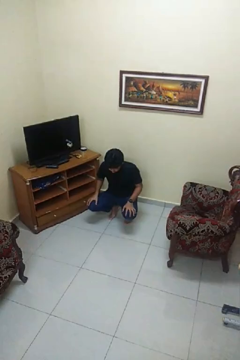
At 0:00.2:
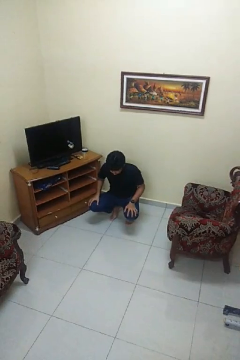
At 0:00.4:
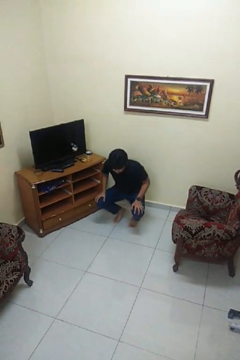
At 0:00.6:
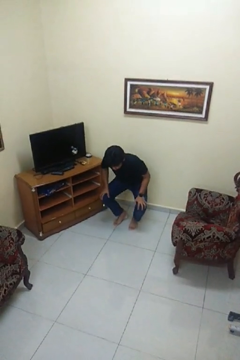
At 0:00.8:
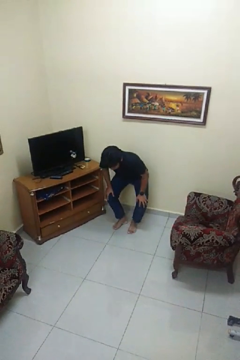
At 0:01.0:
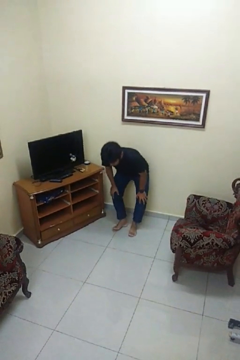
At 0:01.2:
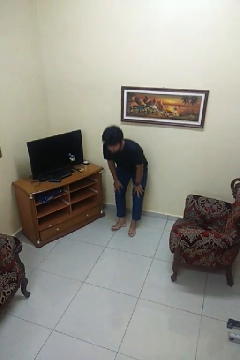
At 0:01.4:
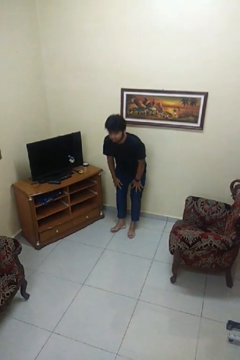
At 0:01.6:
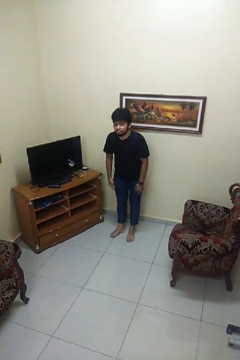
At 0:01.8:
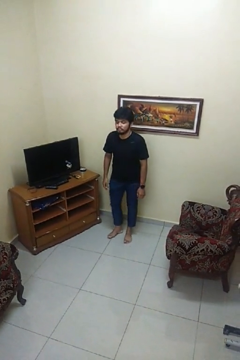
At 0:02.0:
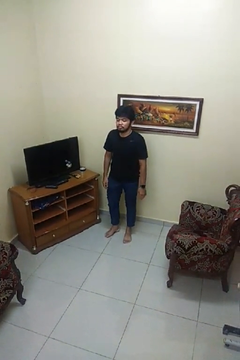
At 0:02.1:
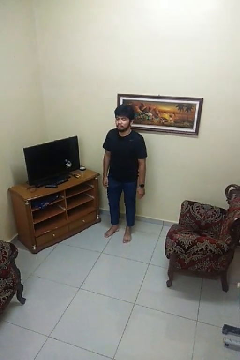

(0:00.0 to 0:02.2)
person stands up

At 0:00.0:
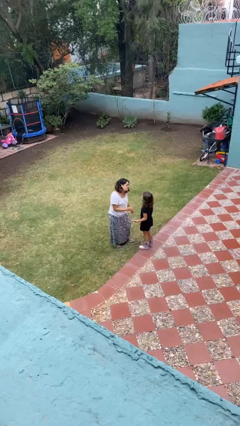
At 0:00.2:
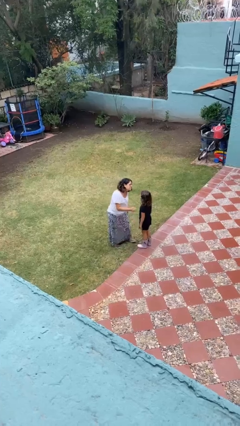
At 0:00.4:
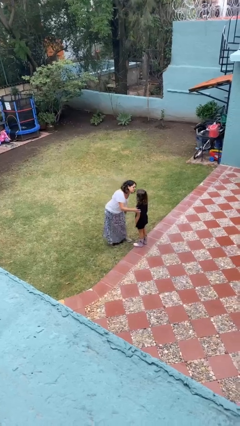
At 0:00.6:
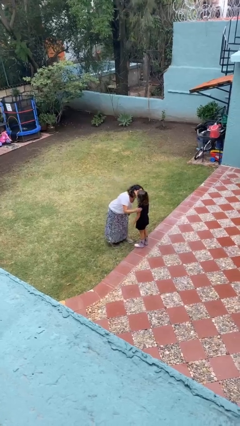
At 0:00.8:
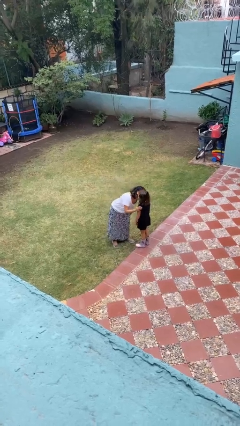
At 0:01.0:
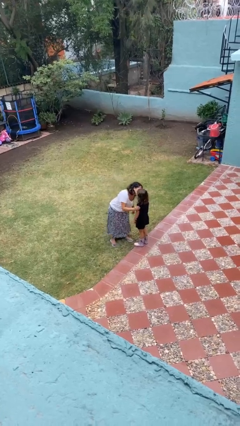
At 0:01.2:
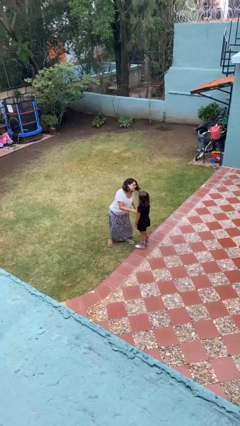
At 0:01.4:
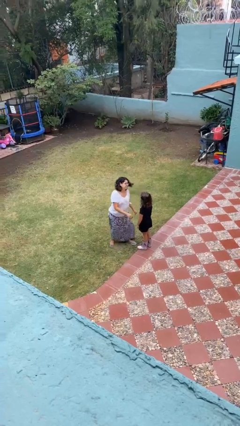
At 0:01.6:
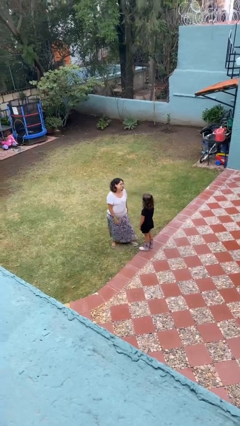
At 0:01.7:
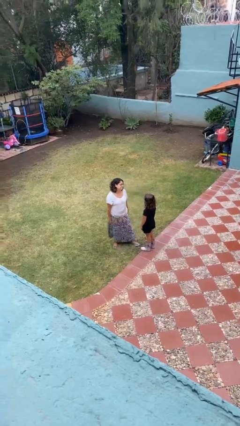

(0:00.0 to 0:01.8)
person kisses cheek of person

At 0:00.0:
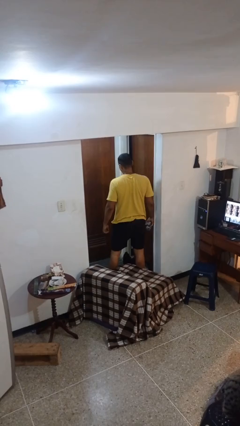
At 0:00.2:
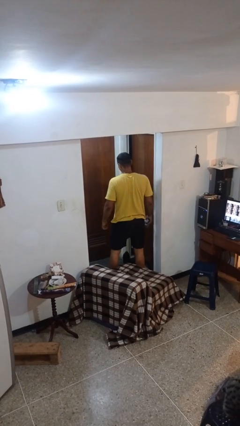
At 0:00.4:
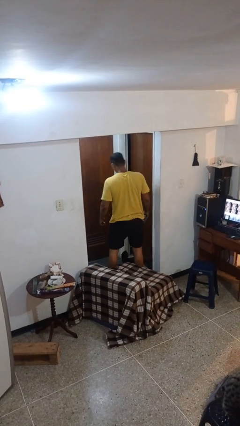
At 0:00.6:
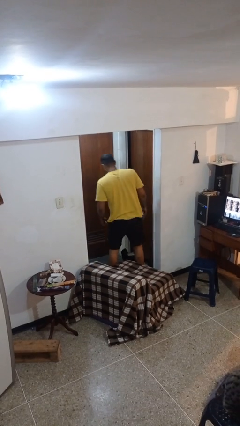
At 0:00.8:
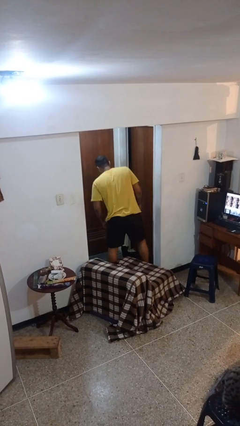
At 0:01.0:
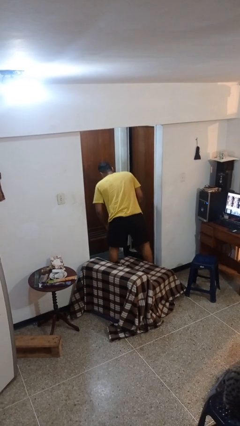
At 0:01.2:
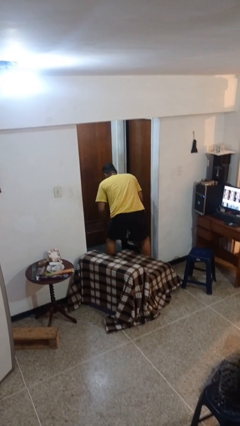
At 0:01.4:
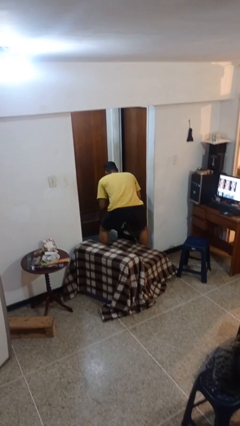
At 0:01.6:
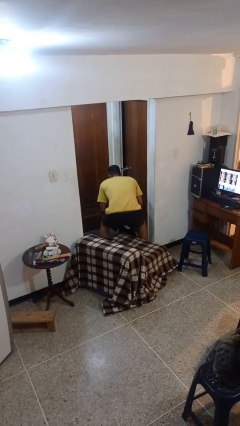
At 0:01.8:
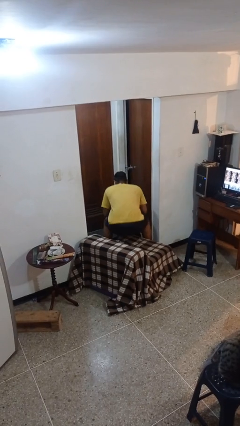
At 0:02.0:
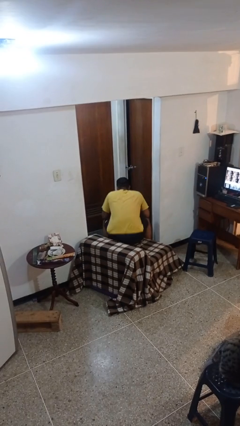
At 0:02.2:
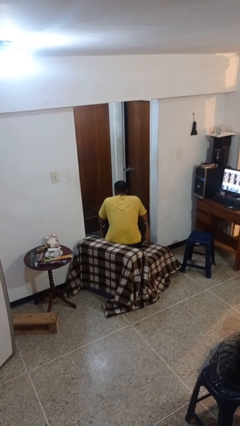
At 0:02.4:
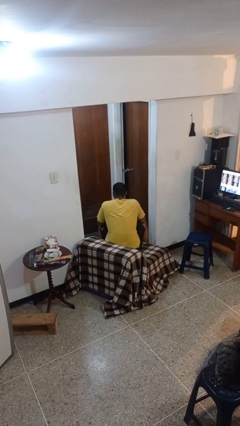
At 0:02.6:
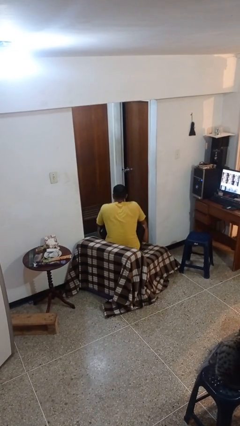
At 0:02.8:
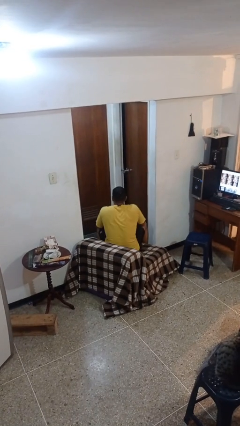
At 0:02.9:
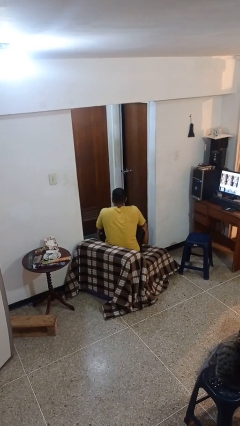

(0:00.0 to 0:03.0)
person lies down on couch

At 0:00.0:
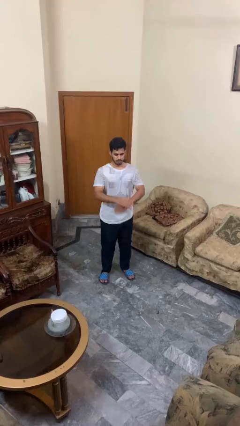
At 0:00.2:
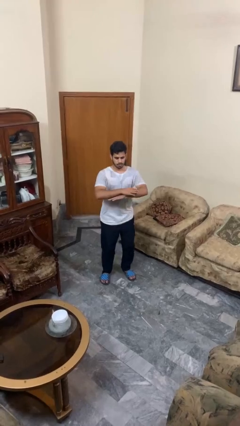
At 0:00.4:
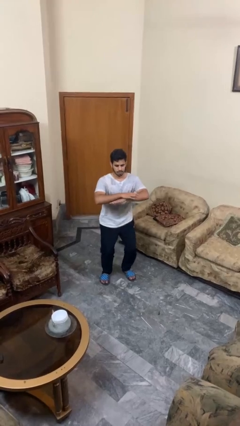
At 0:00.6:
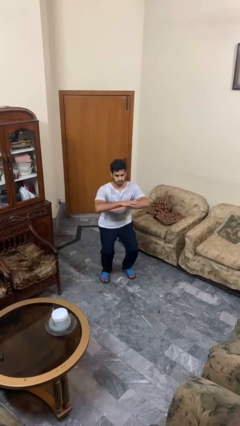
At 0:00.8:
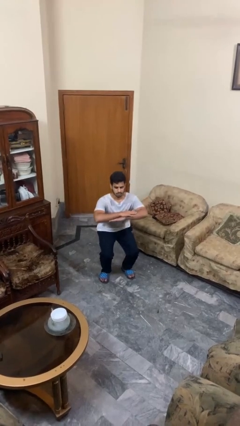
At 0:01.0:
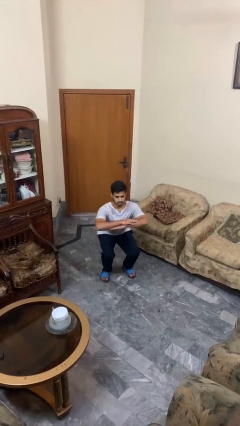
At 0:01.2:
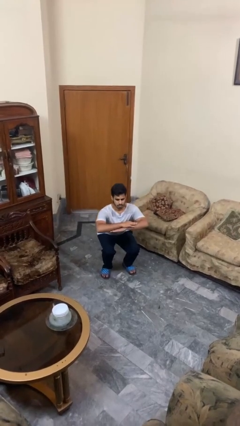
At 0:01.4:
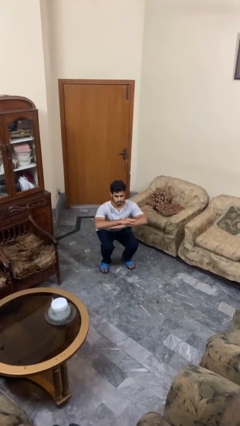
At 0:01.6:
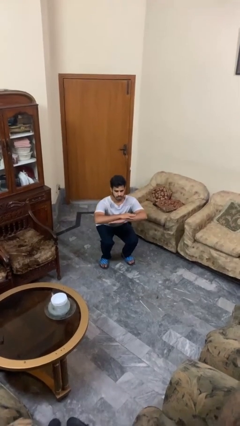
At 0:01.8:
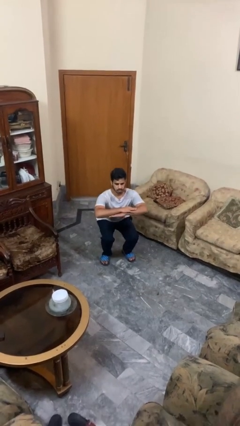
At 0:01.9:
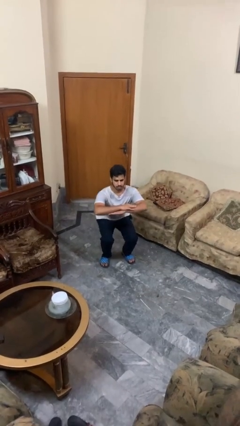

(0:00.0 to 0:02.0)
person squats

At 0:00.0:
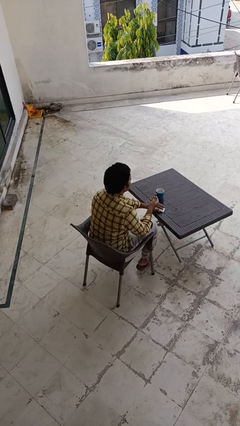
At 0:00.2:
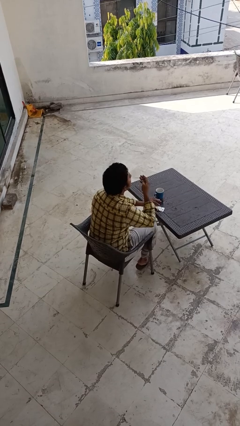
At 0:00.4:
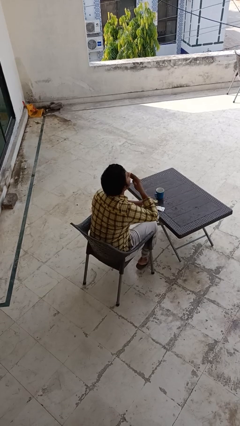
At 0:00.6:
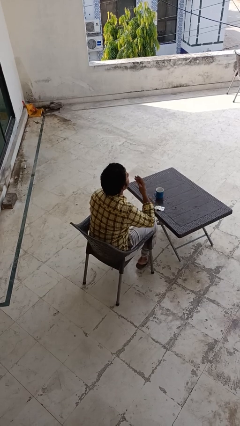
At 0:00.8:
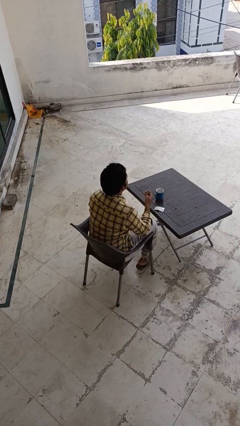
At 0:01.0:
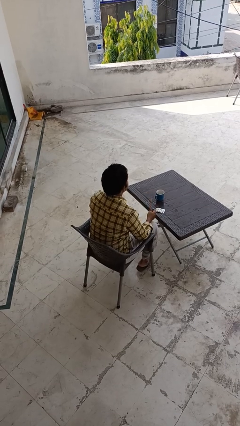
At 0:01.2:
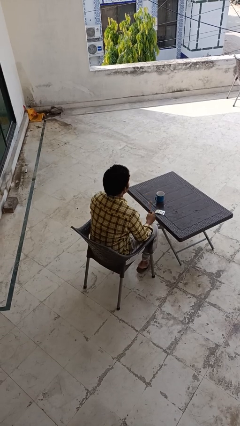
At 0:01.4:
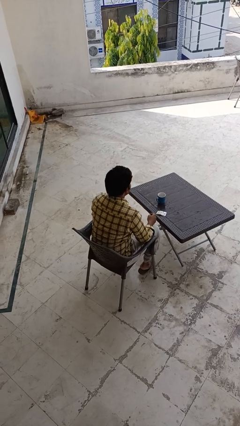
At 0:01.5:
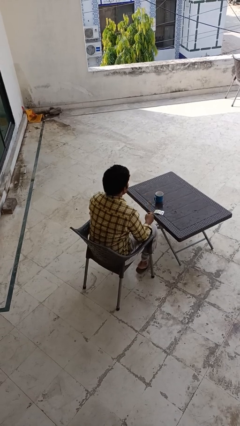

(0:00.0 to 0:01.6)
person takes medicine pills

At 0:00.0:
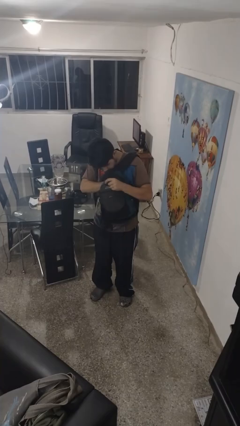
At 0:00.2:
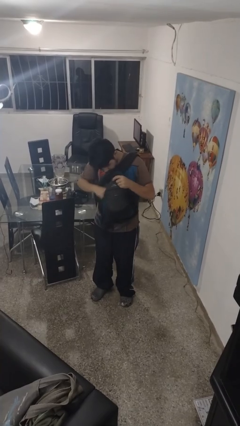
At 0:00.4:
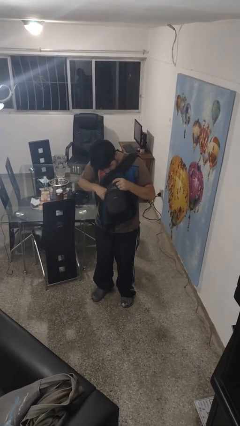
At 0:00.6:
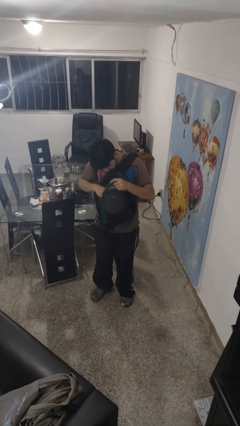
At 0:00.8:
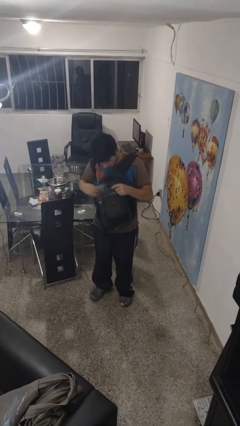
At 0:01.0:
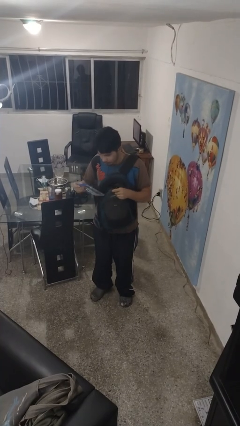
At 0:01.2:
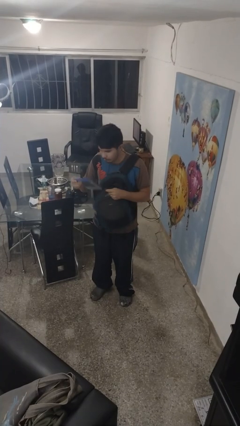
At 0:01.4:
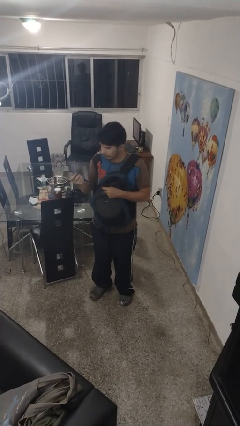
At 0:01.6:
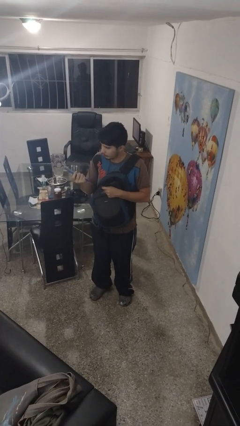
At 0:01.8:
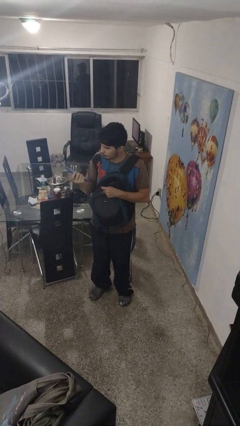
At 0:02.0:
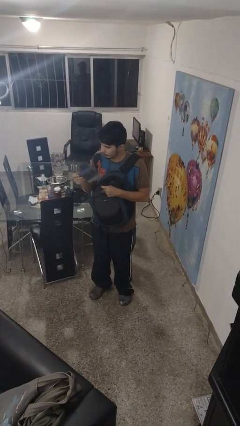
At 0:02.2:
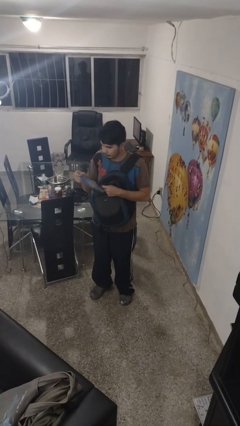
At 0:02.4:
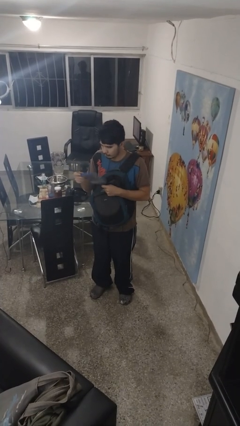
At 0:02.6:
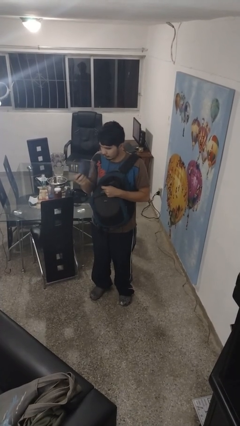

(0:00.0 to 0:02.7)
person takes object from backpack

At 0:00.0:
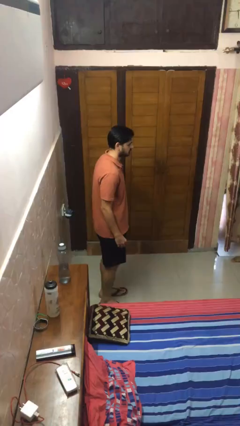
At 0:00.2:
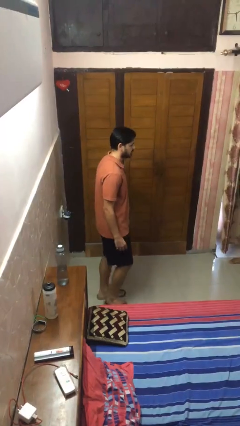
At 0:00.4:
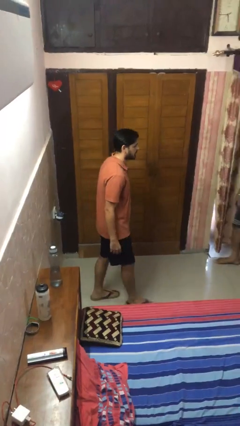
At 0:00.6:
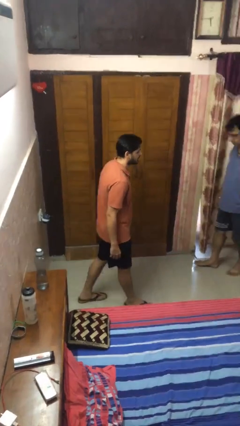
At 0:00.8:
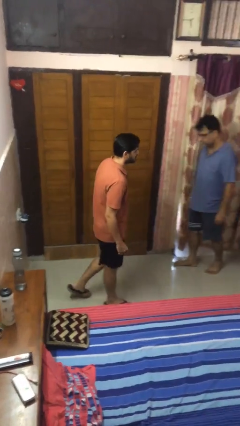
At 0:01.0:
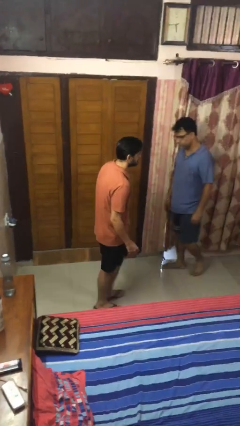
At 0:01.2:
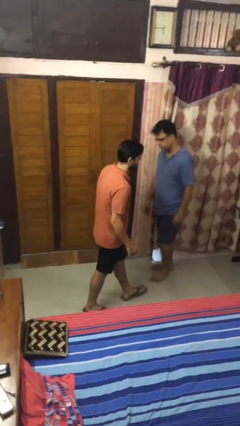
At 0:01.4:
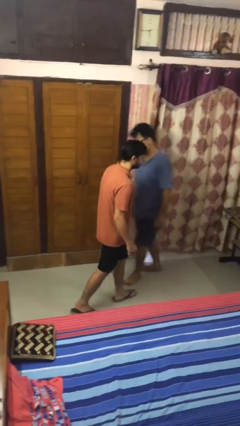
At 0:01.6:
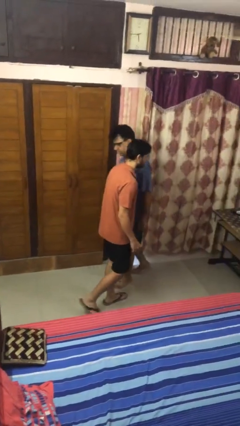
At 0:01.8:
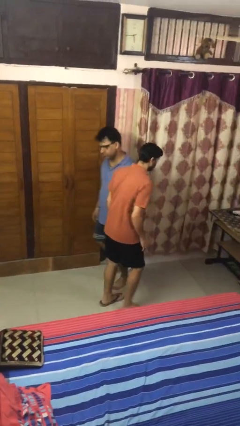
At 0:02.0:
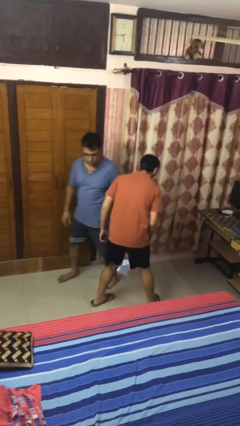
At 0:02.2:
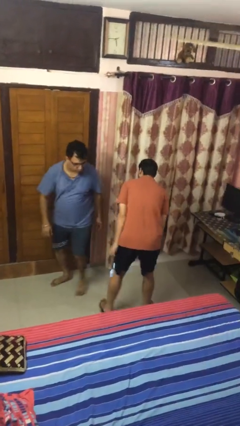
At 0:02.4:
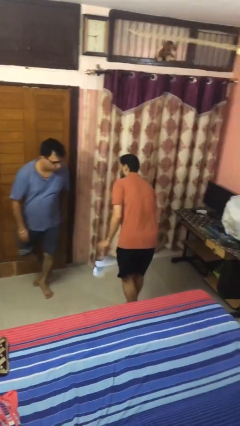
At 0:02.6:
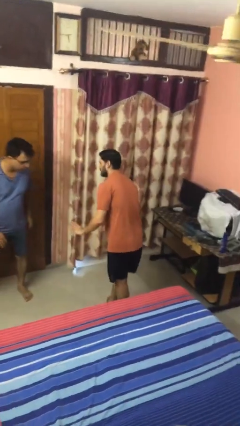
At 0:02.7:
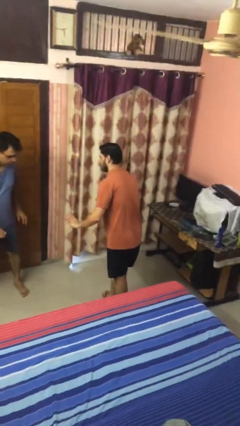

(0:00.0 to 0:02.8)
person bumps into person

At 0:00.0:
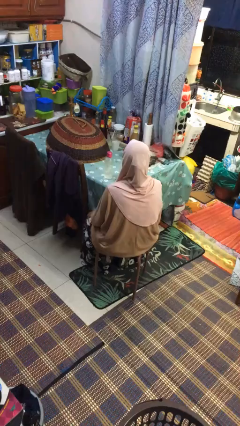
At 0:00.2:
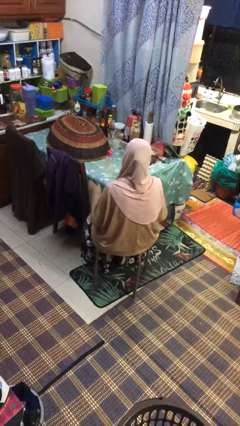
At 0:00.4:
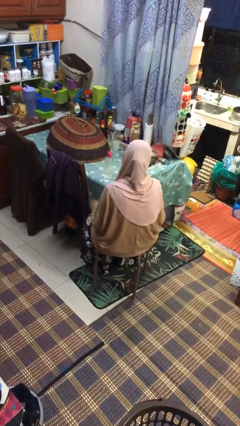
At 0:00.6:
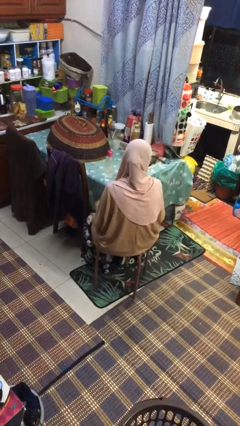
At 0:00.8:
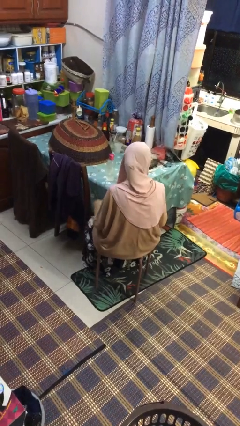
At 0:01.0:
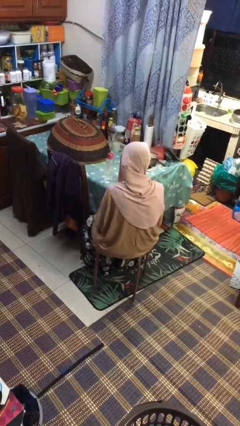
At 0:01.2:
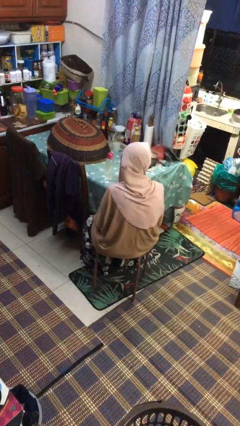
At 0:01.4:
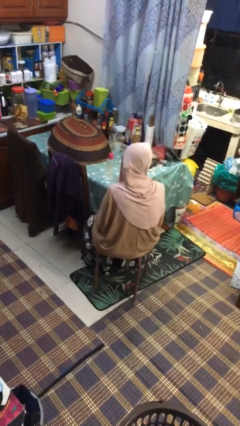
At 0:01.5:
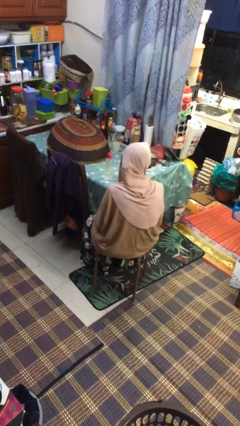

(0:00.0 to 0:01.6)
person slaps hands on thighs
